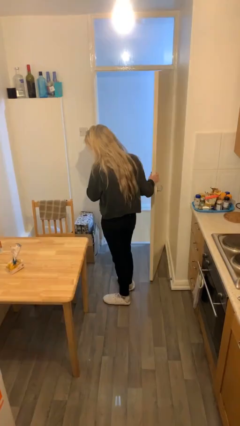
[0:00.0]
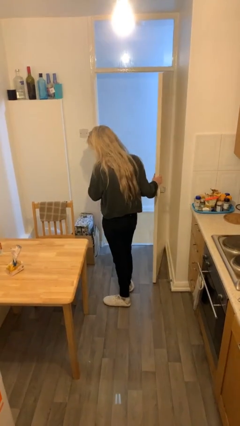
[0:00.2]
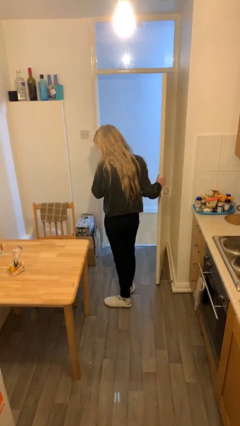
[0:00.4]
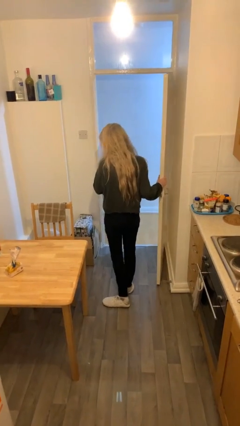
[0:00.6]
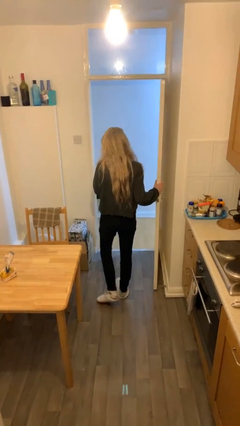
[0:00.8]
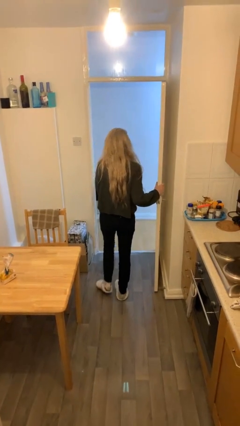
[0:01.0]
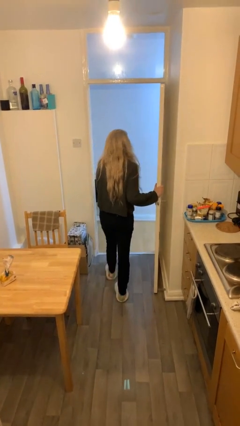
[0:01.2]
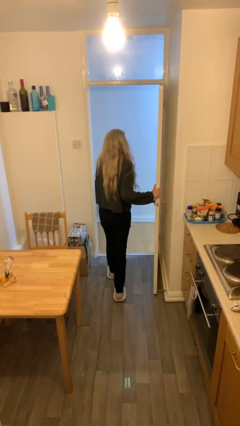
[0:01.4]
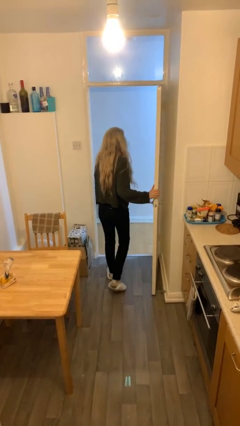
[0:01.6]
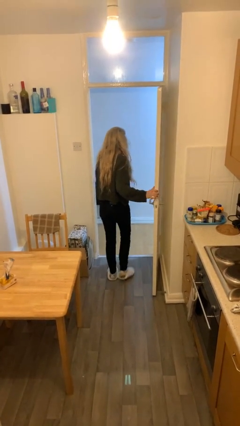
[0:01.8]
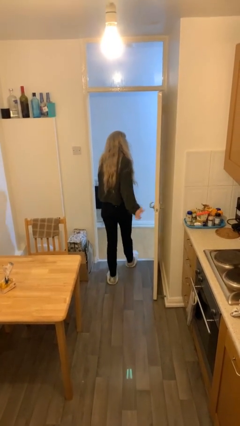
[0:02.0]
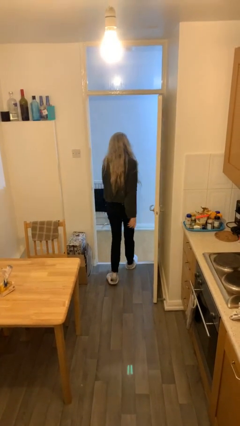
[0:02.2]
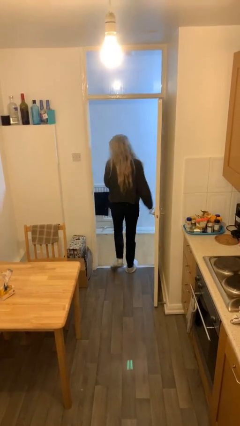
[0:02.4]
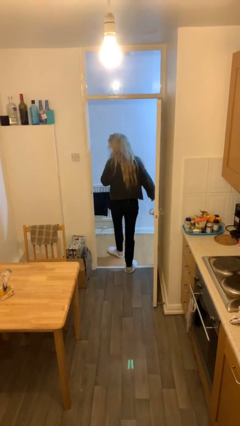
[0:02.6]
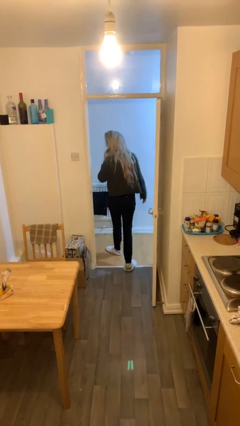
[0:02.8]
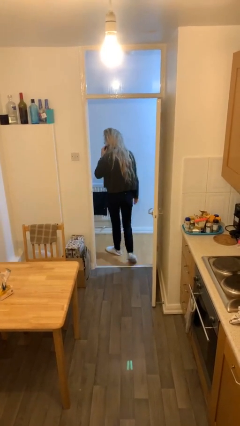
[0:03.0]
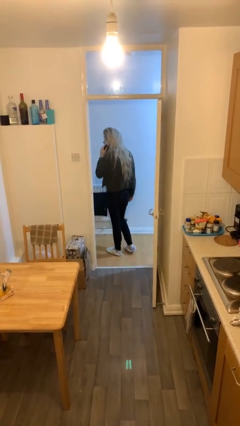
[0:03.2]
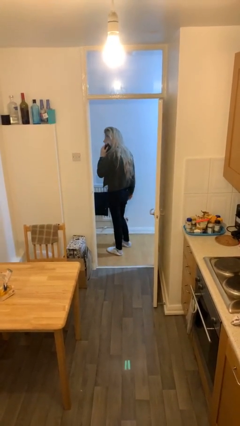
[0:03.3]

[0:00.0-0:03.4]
person exits scene through structure

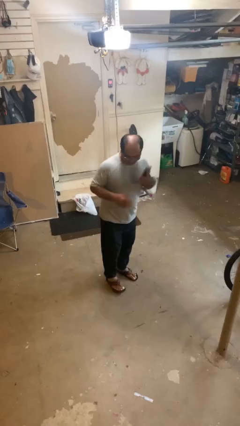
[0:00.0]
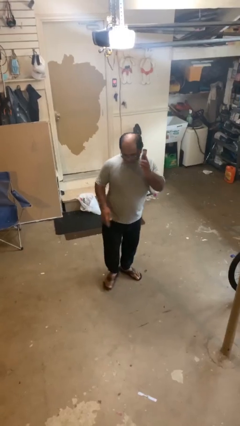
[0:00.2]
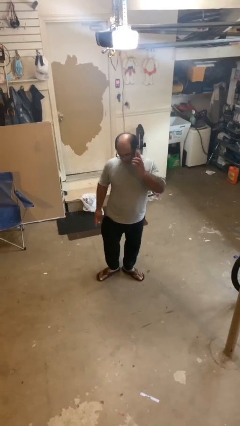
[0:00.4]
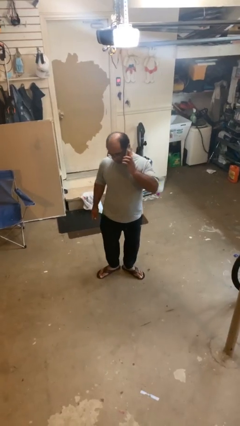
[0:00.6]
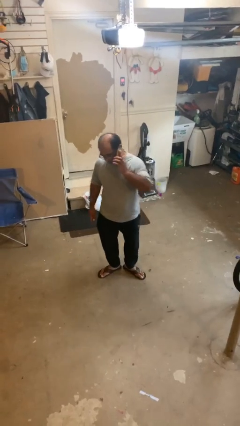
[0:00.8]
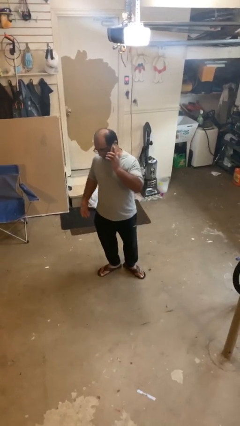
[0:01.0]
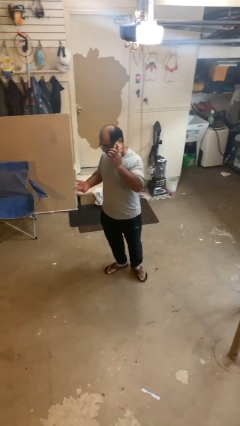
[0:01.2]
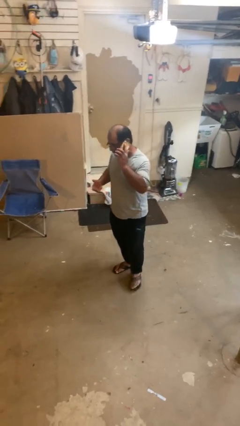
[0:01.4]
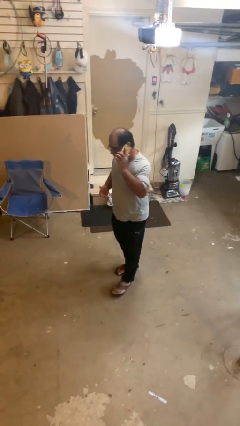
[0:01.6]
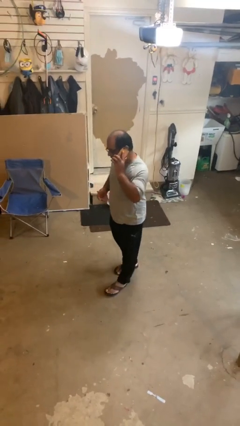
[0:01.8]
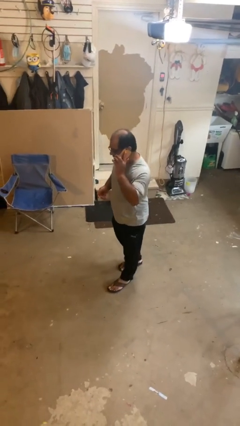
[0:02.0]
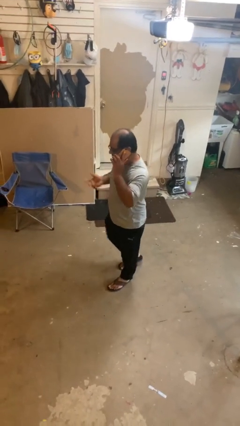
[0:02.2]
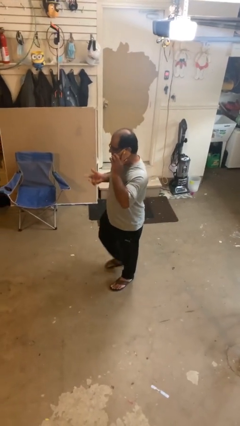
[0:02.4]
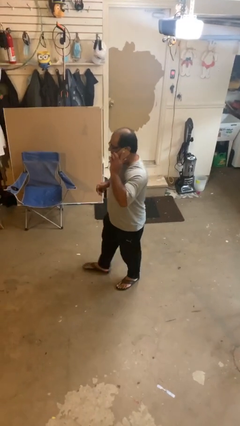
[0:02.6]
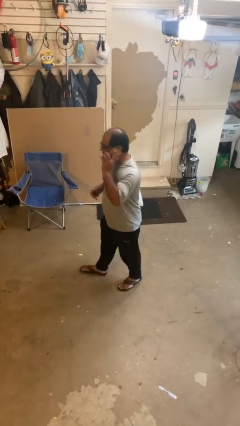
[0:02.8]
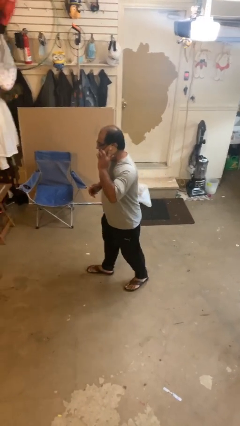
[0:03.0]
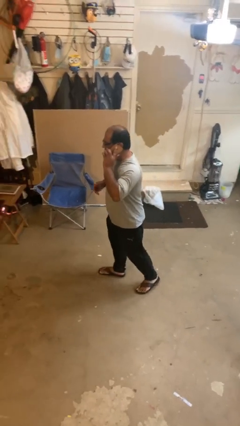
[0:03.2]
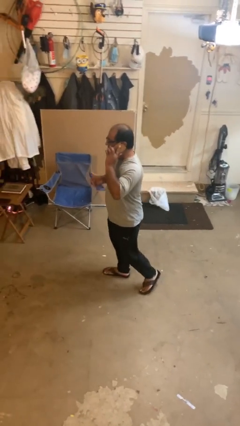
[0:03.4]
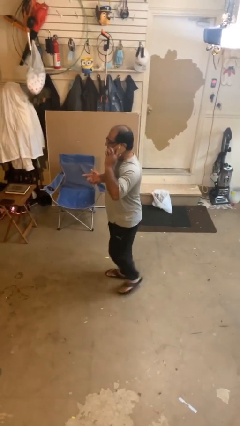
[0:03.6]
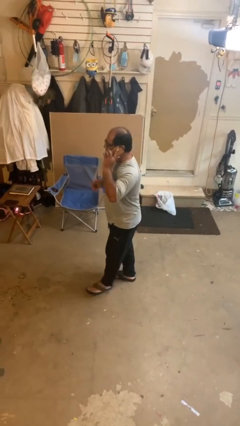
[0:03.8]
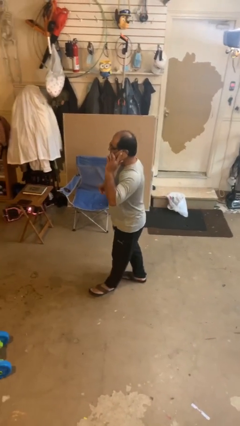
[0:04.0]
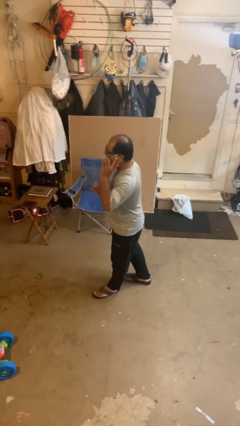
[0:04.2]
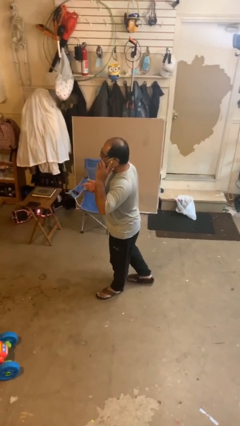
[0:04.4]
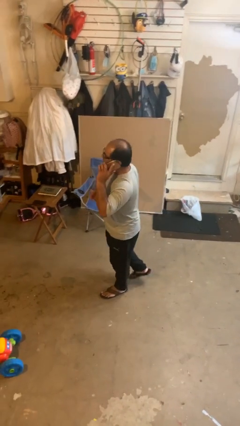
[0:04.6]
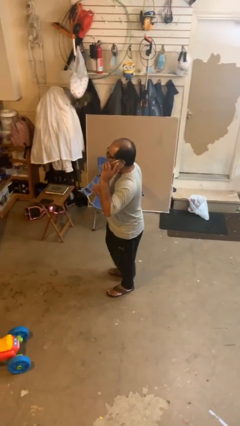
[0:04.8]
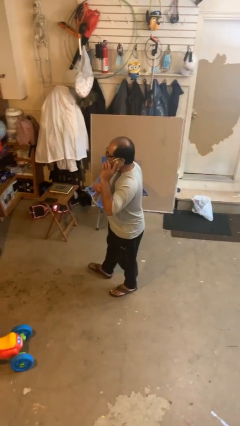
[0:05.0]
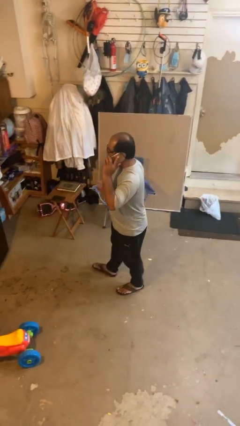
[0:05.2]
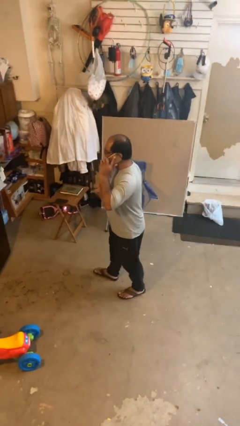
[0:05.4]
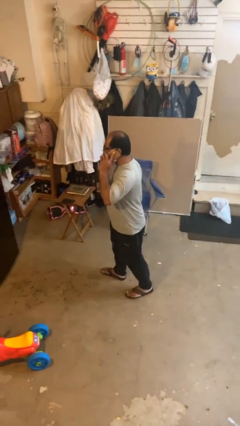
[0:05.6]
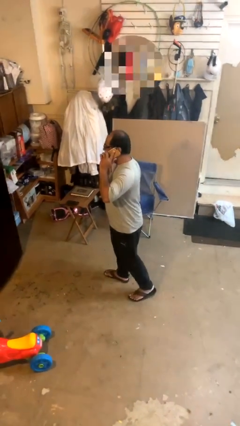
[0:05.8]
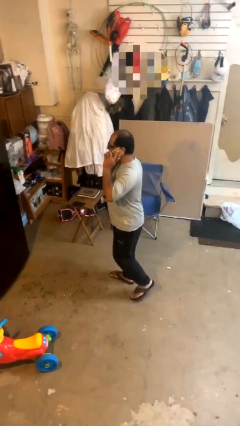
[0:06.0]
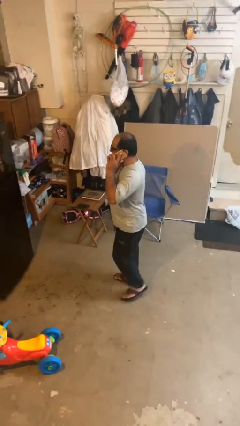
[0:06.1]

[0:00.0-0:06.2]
person talks on phone

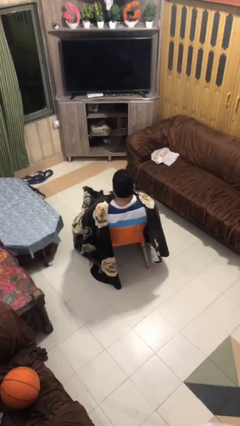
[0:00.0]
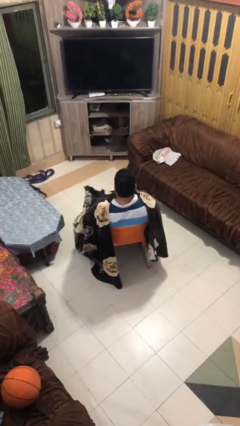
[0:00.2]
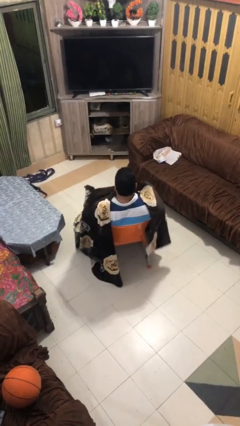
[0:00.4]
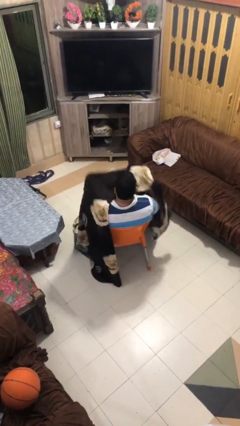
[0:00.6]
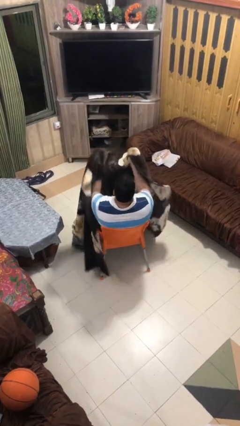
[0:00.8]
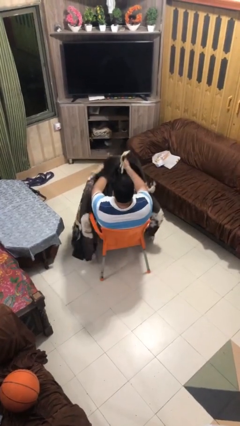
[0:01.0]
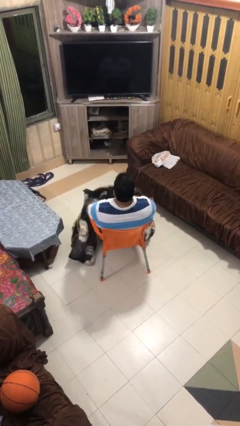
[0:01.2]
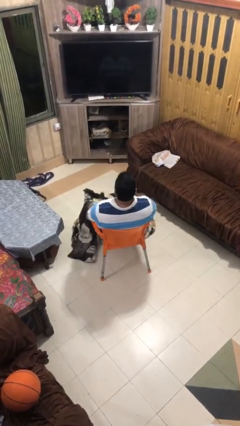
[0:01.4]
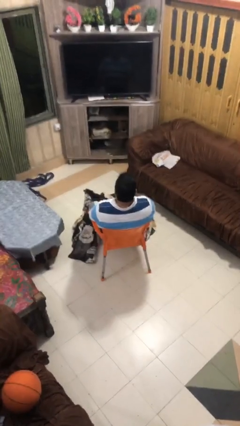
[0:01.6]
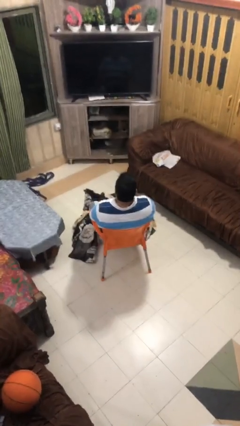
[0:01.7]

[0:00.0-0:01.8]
person uncovers with blanket

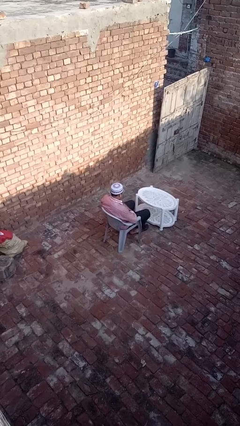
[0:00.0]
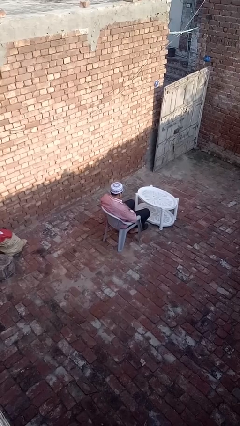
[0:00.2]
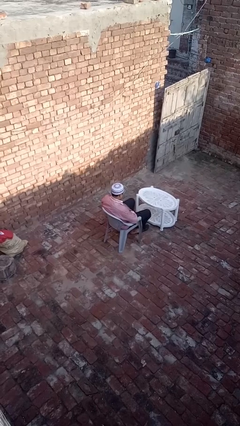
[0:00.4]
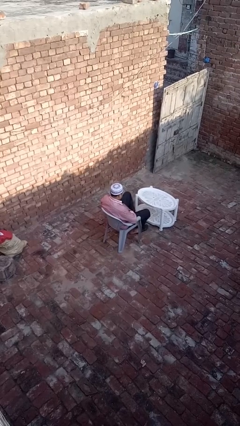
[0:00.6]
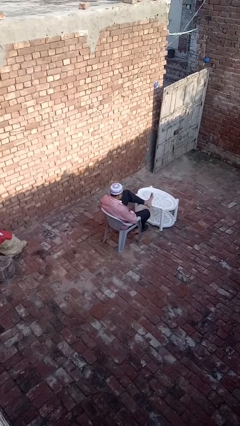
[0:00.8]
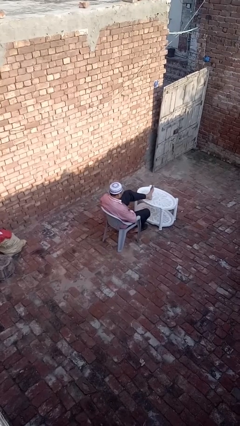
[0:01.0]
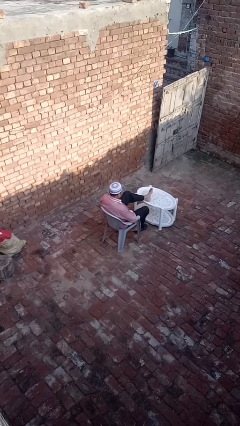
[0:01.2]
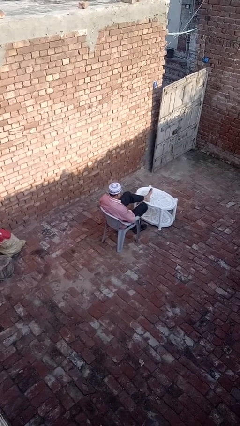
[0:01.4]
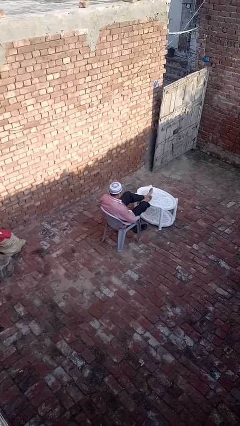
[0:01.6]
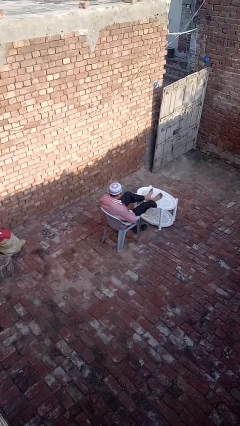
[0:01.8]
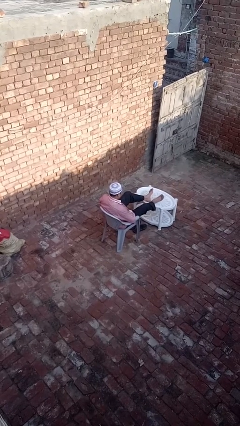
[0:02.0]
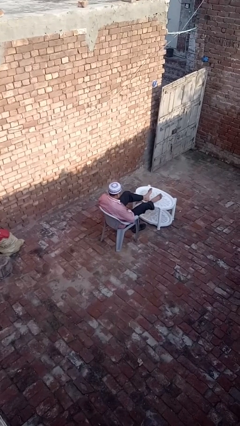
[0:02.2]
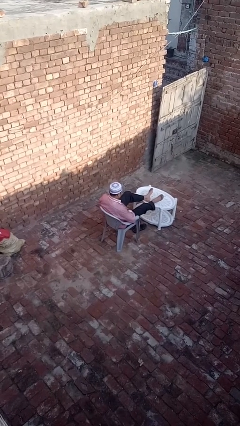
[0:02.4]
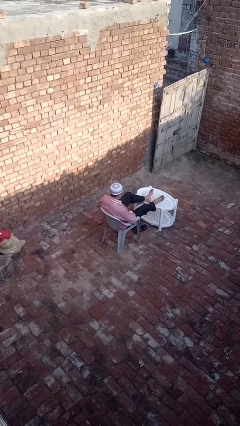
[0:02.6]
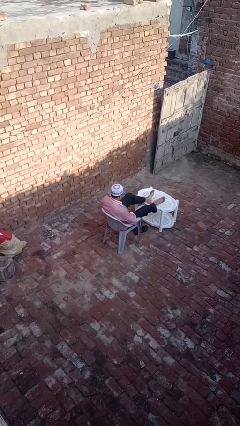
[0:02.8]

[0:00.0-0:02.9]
person puts feet up

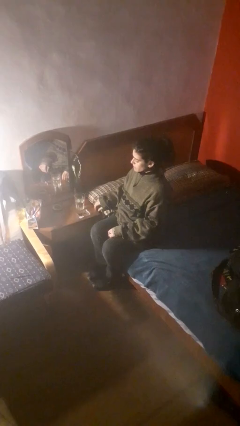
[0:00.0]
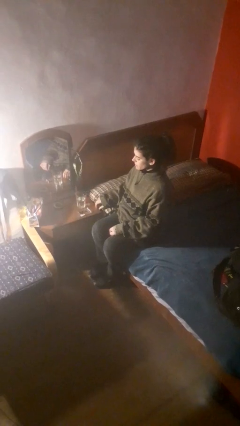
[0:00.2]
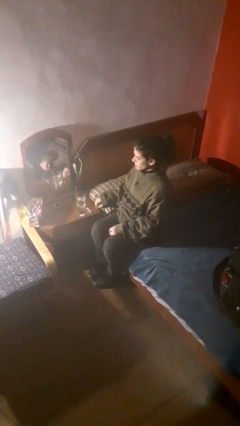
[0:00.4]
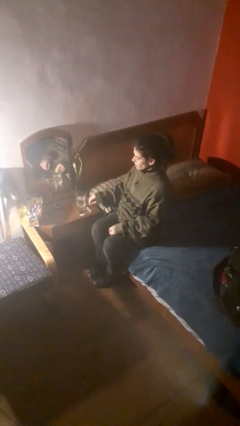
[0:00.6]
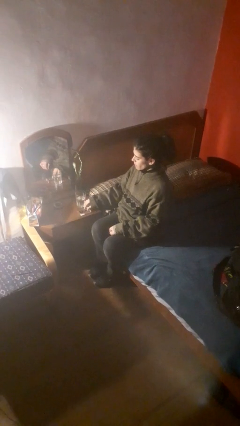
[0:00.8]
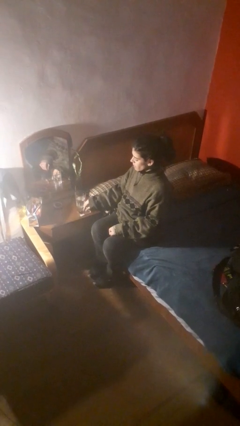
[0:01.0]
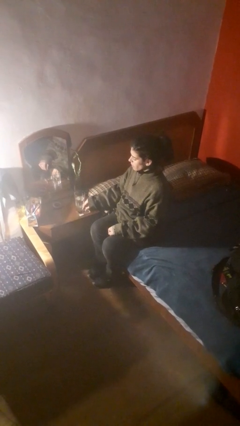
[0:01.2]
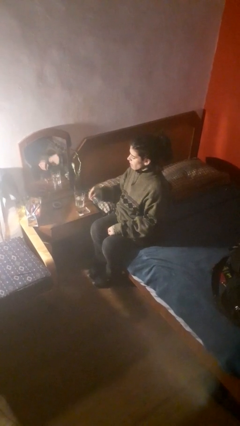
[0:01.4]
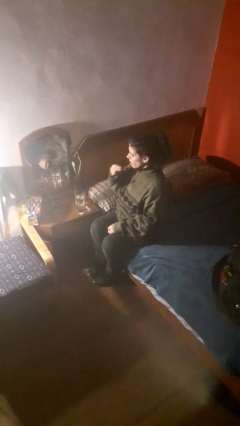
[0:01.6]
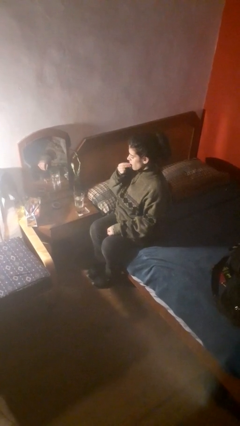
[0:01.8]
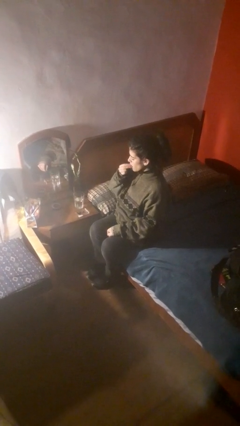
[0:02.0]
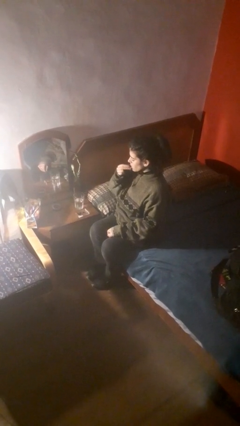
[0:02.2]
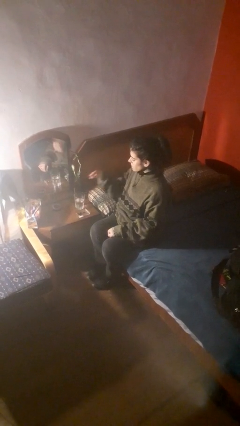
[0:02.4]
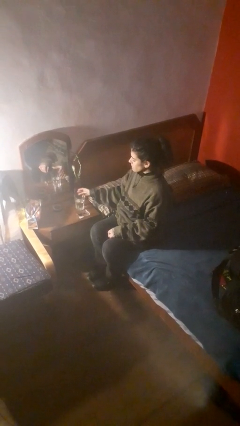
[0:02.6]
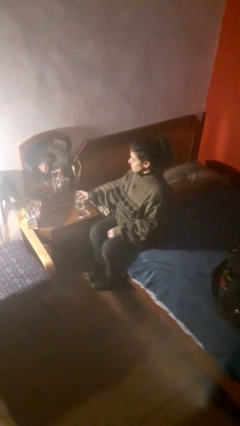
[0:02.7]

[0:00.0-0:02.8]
person takes medicine pills

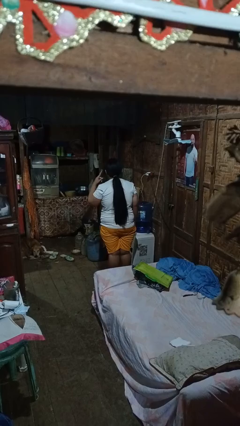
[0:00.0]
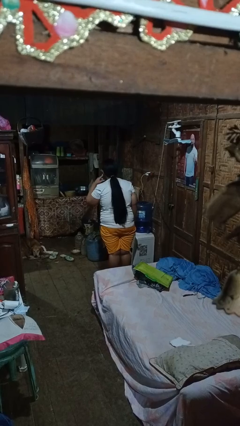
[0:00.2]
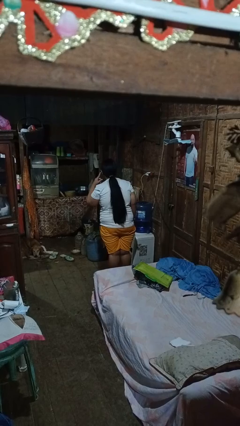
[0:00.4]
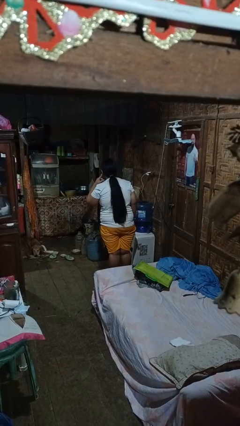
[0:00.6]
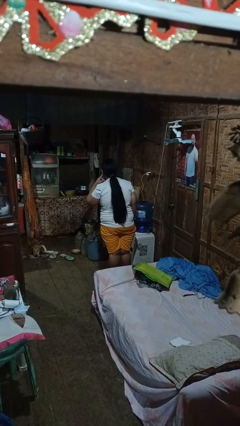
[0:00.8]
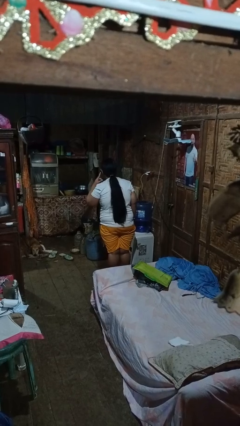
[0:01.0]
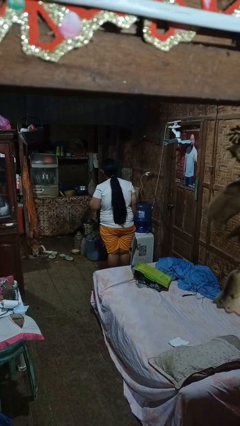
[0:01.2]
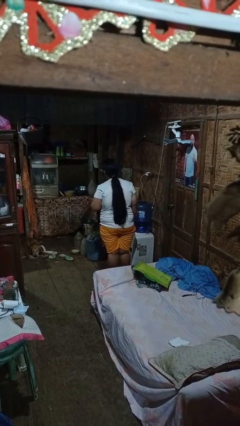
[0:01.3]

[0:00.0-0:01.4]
person gestures listen closely
